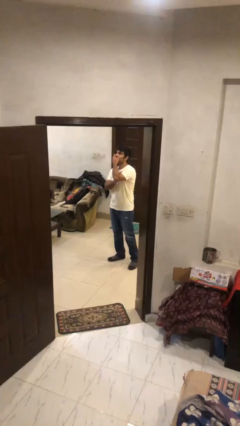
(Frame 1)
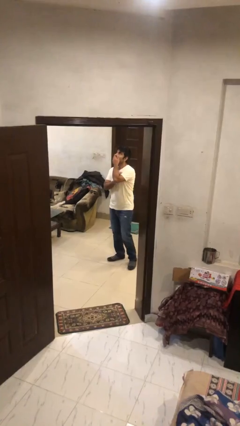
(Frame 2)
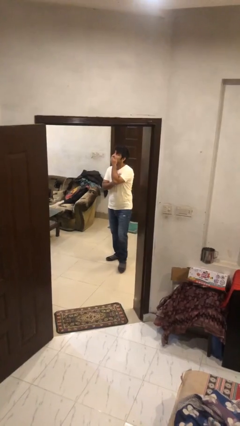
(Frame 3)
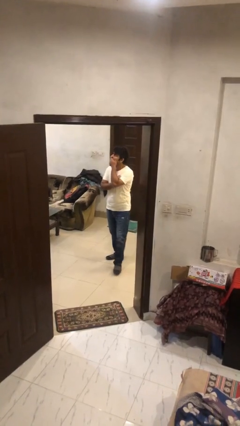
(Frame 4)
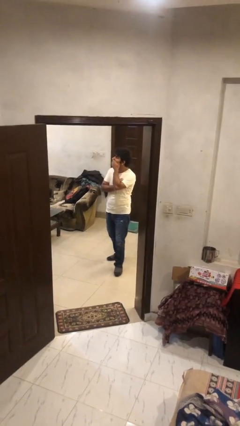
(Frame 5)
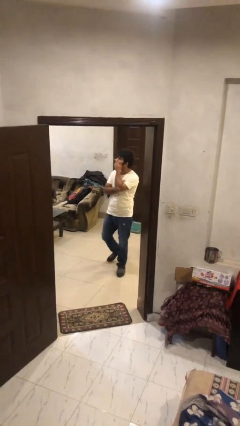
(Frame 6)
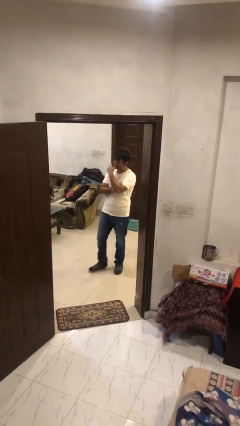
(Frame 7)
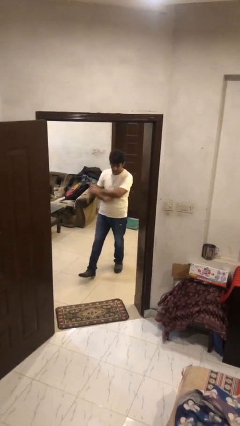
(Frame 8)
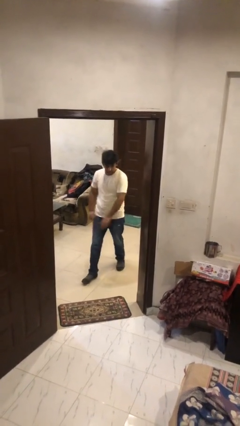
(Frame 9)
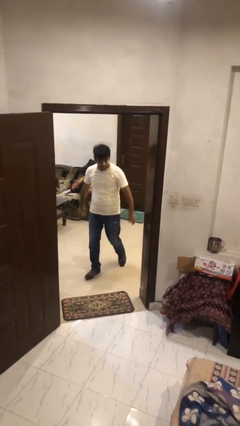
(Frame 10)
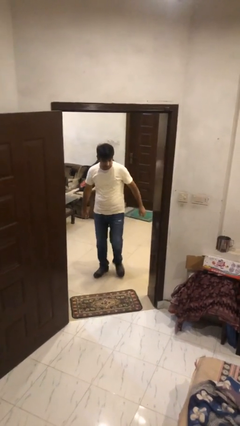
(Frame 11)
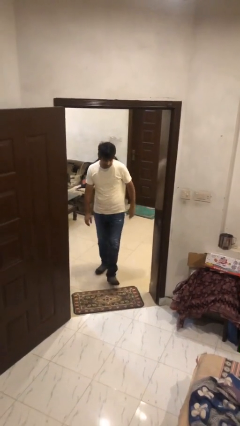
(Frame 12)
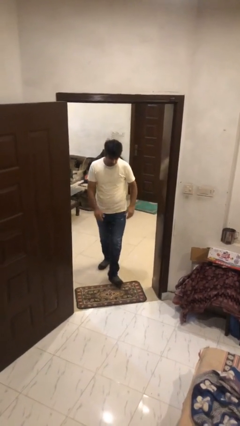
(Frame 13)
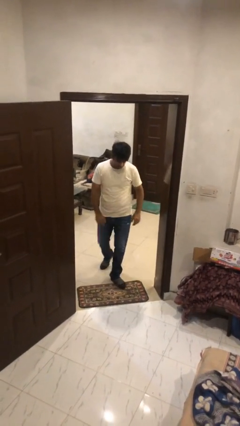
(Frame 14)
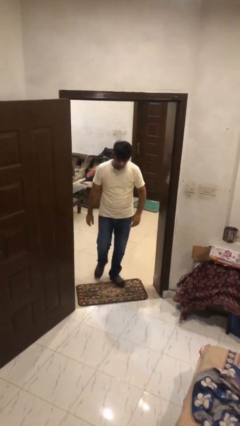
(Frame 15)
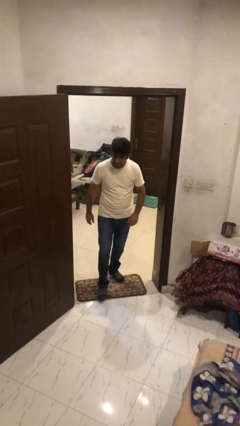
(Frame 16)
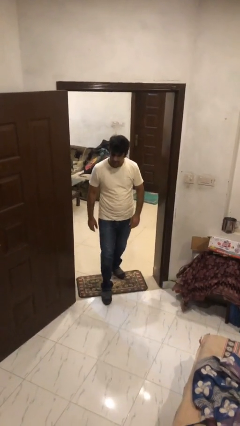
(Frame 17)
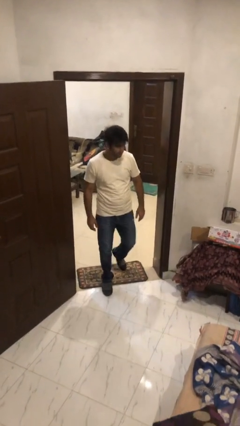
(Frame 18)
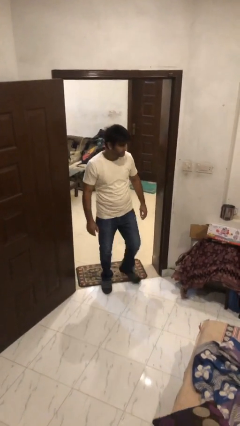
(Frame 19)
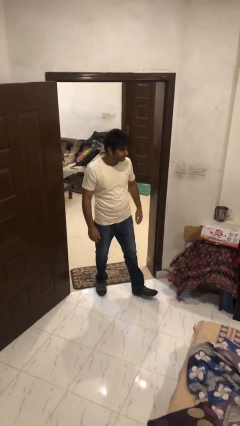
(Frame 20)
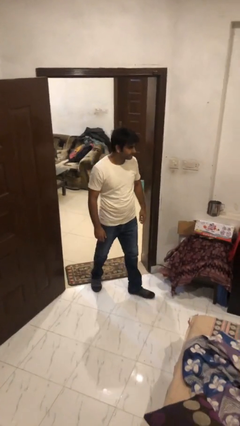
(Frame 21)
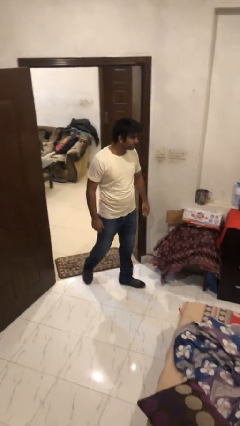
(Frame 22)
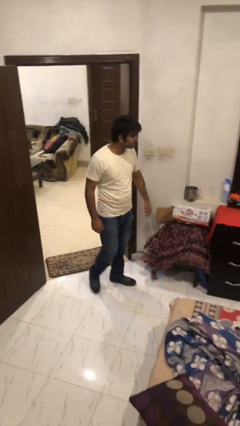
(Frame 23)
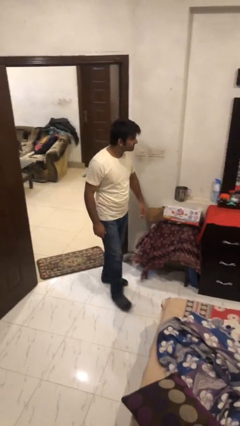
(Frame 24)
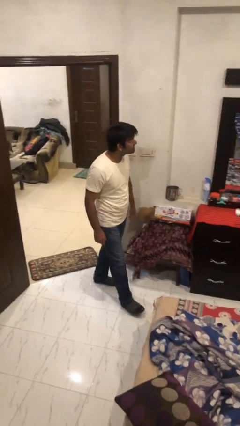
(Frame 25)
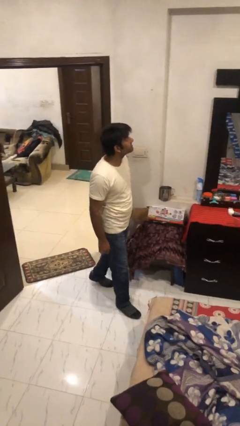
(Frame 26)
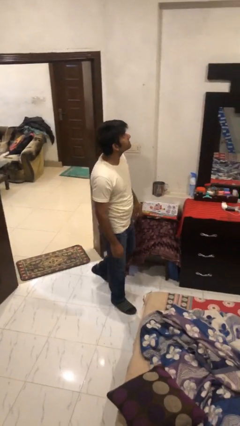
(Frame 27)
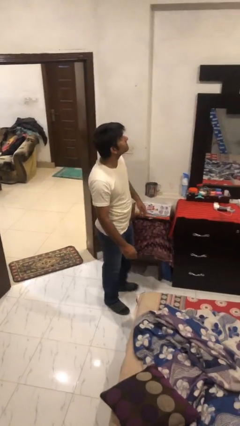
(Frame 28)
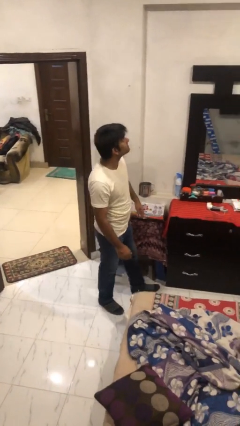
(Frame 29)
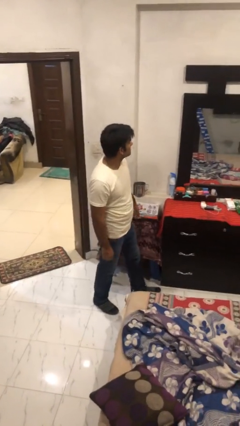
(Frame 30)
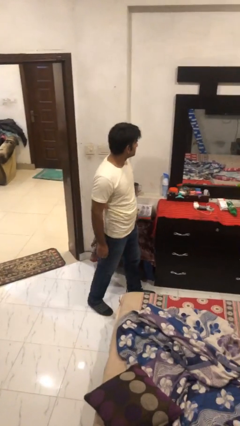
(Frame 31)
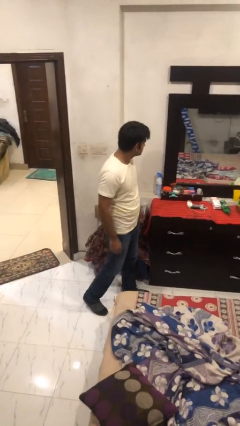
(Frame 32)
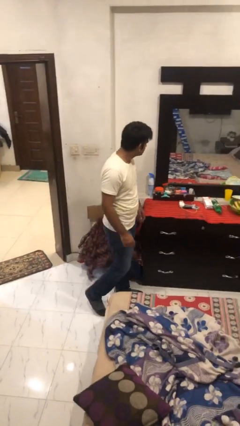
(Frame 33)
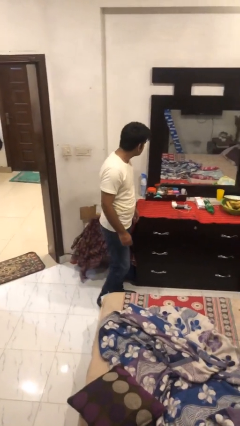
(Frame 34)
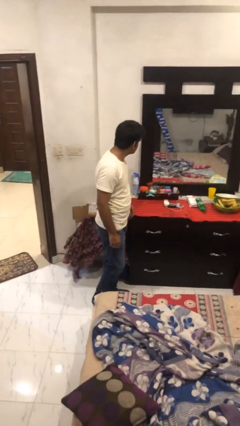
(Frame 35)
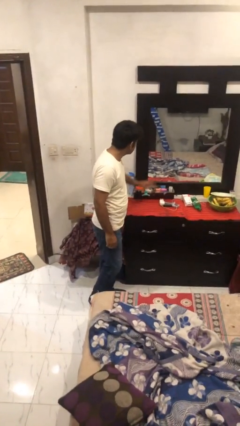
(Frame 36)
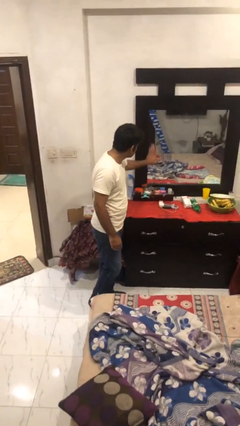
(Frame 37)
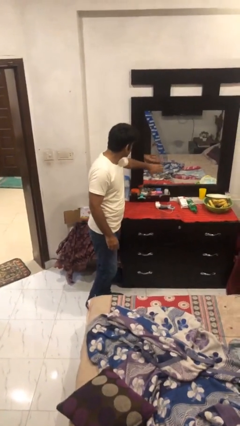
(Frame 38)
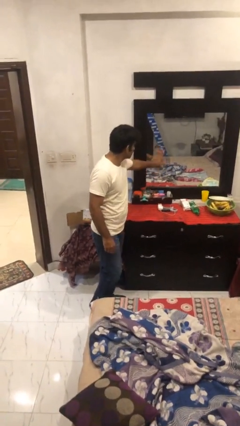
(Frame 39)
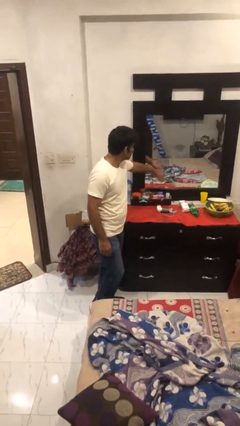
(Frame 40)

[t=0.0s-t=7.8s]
person enters scene through structure

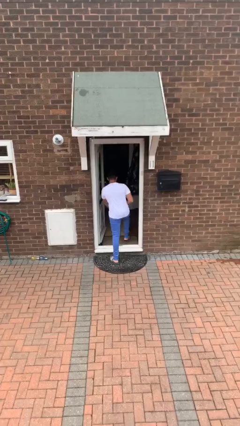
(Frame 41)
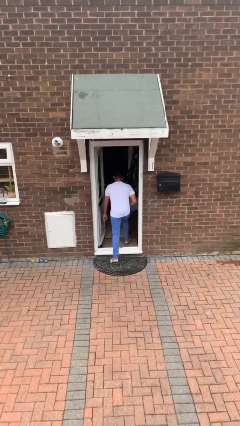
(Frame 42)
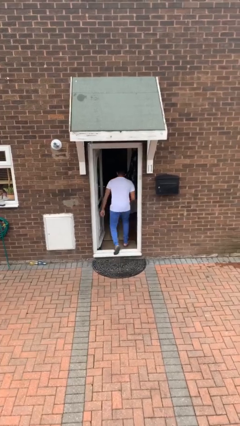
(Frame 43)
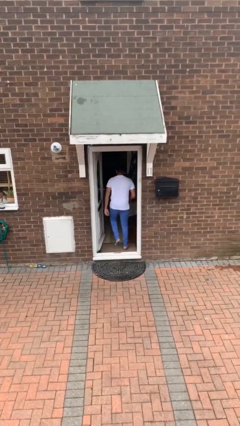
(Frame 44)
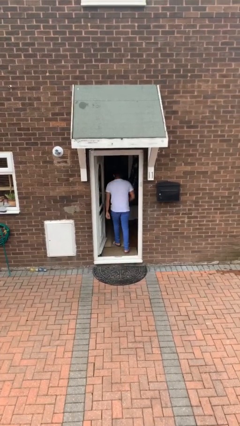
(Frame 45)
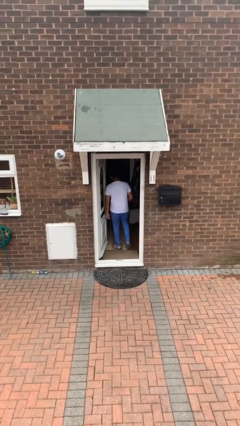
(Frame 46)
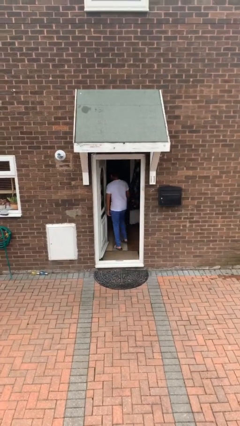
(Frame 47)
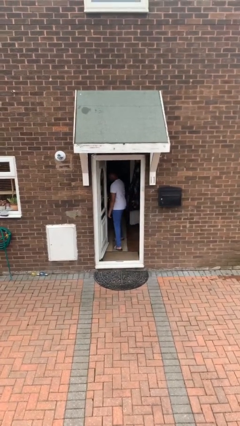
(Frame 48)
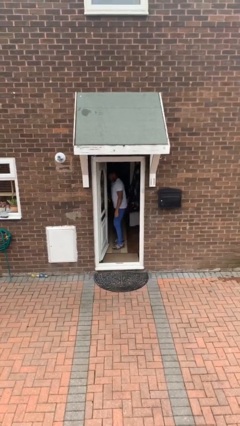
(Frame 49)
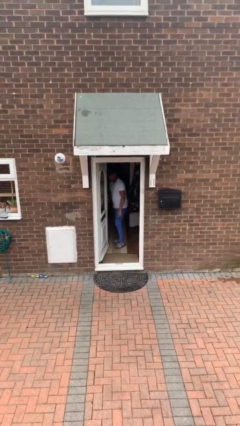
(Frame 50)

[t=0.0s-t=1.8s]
person exits scene through structure

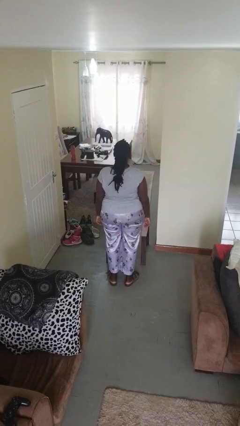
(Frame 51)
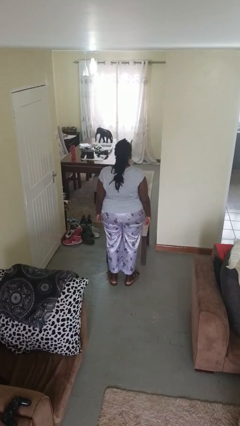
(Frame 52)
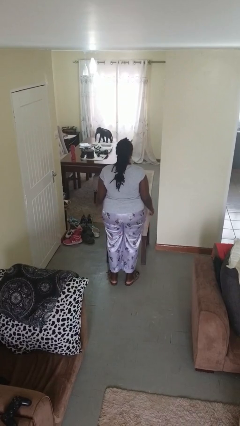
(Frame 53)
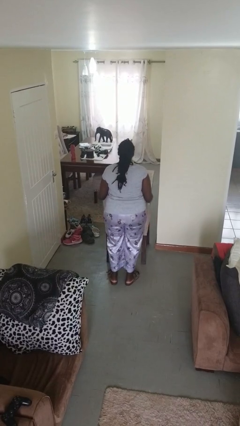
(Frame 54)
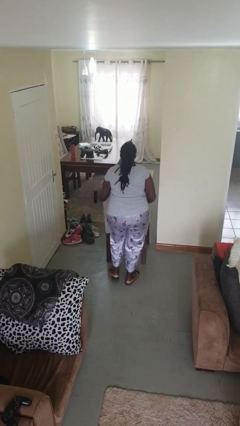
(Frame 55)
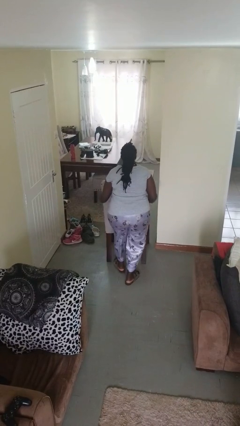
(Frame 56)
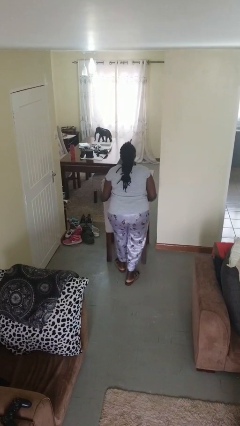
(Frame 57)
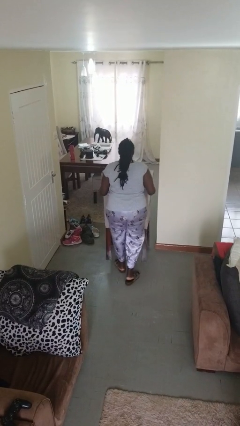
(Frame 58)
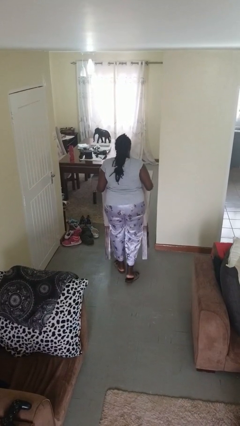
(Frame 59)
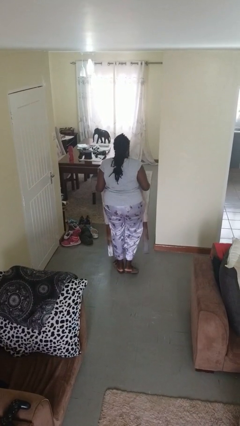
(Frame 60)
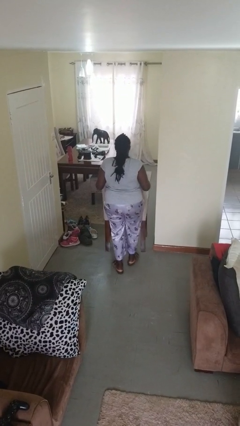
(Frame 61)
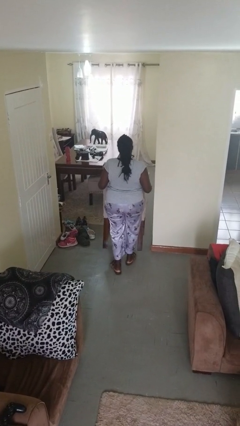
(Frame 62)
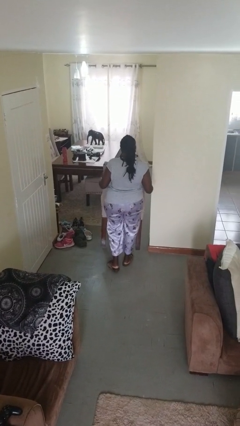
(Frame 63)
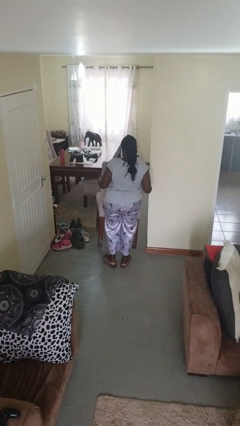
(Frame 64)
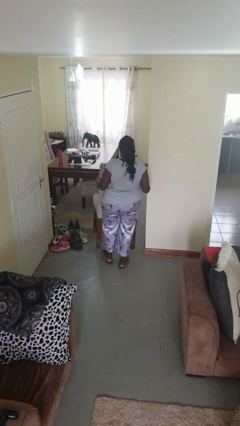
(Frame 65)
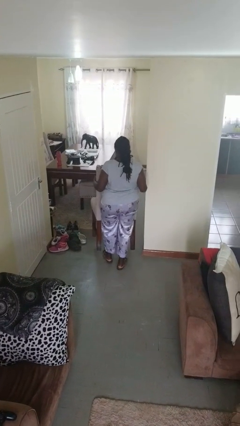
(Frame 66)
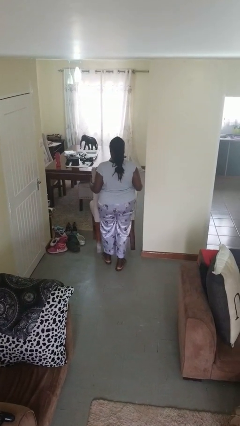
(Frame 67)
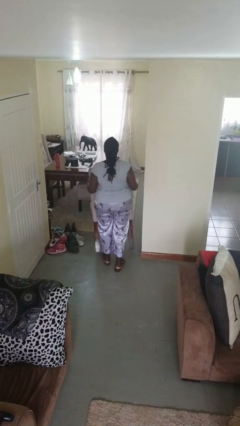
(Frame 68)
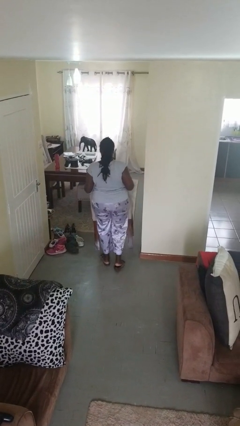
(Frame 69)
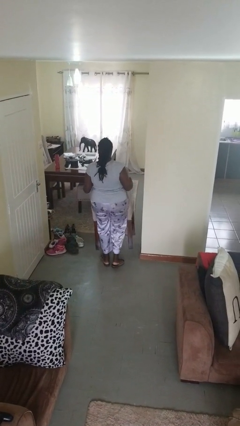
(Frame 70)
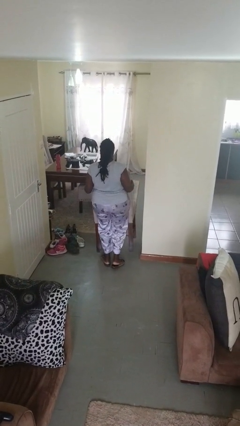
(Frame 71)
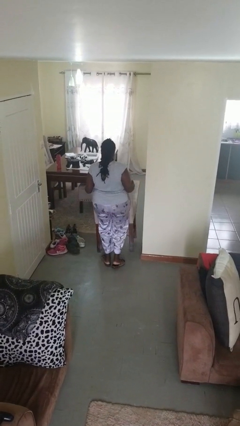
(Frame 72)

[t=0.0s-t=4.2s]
person carries furniture

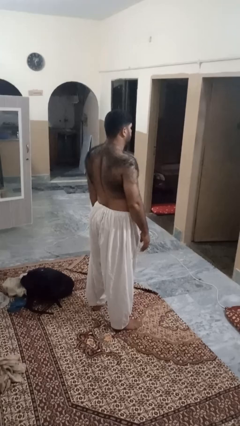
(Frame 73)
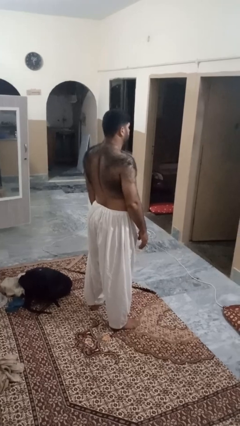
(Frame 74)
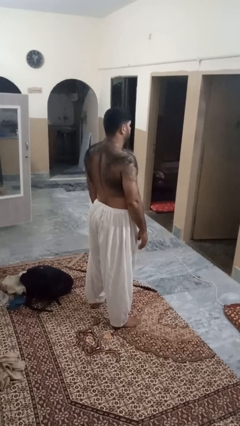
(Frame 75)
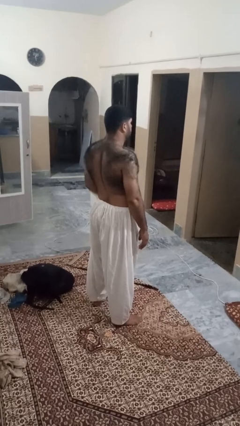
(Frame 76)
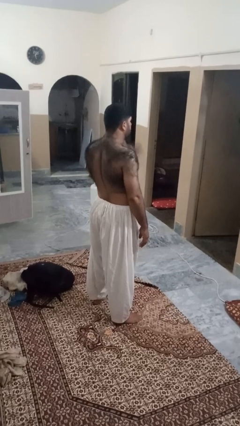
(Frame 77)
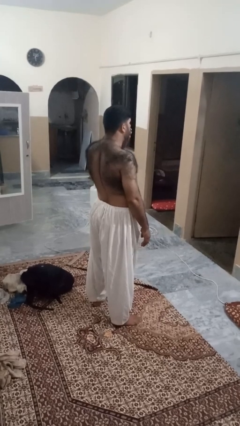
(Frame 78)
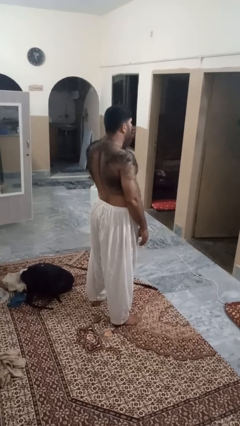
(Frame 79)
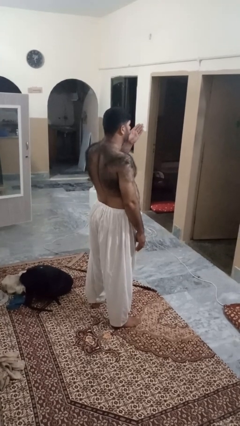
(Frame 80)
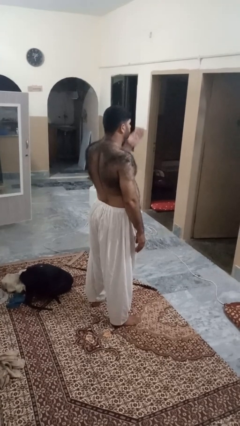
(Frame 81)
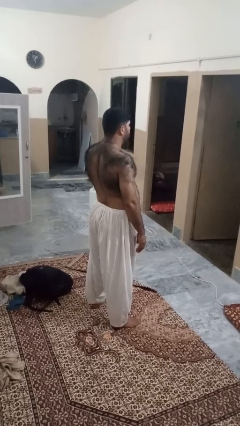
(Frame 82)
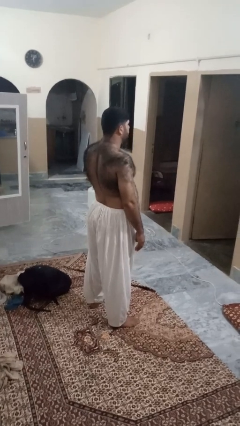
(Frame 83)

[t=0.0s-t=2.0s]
person gestures blow kiss

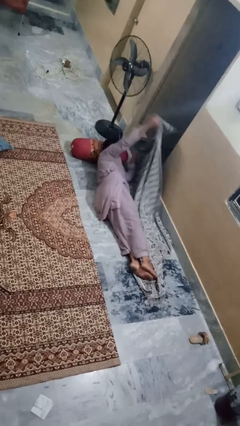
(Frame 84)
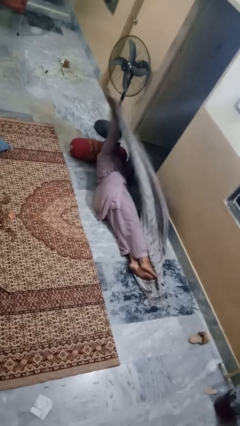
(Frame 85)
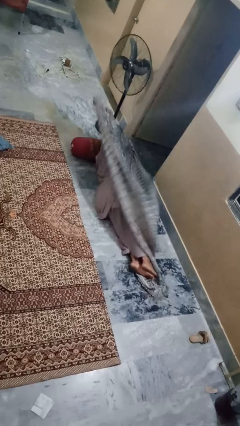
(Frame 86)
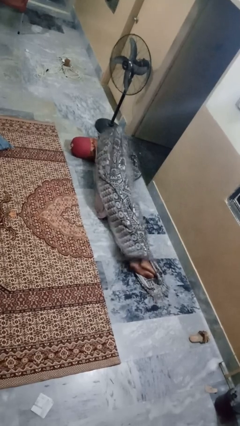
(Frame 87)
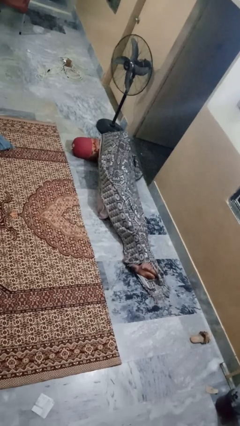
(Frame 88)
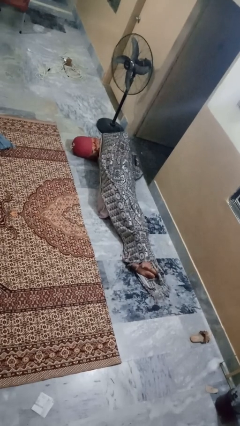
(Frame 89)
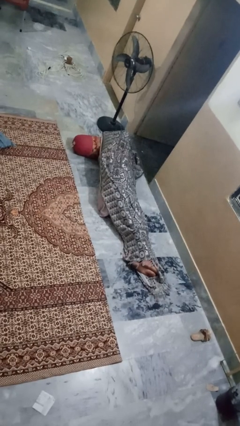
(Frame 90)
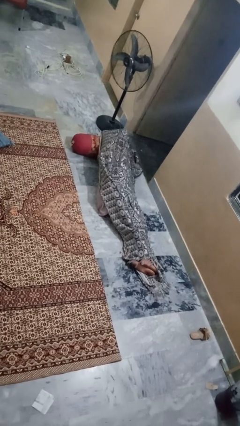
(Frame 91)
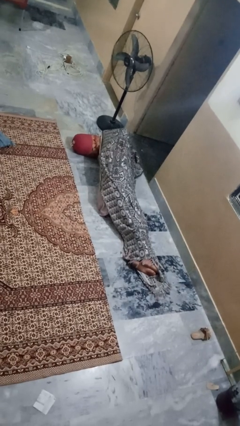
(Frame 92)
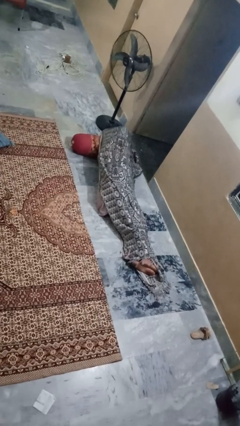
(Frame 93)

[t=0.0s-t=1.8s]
person covers with blanket
